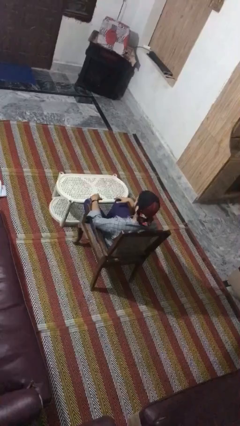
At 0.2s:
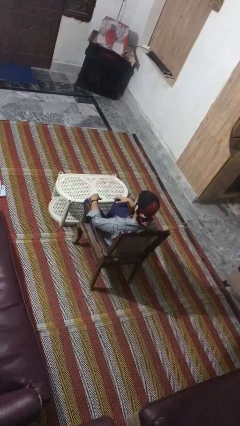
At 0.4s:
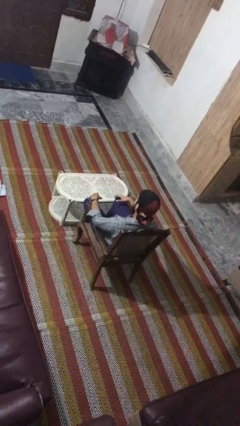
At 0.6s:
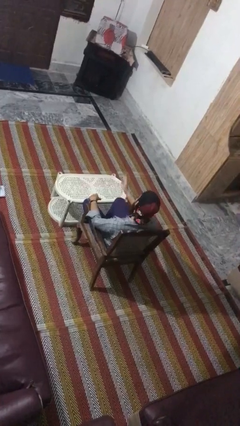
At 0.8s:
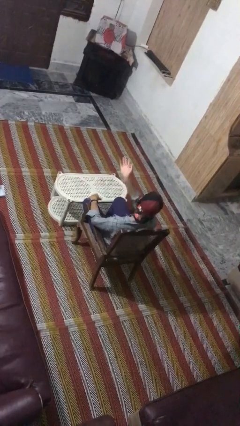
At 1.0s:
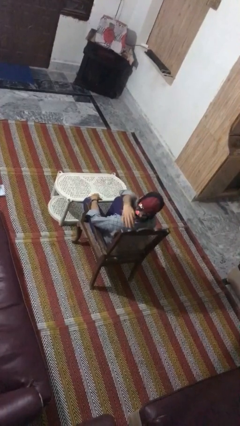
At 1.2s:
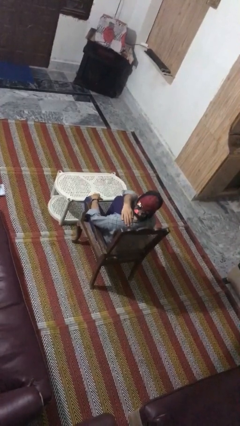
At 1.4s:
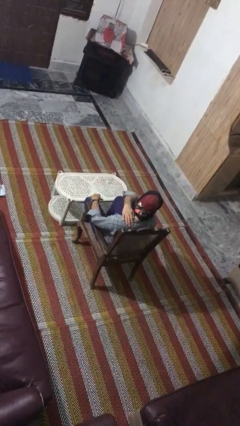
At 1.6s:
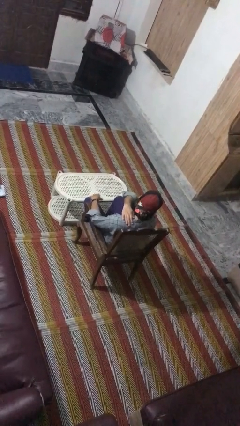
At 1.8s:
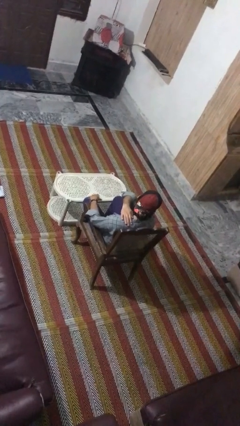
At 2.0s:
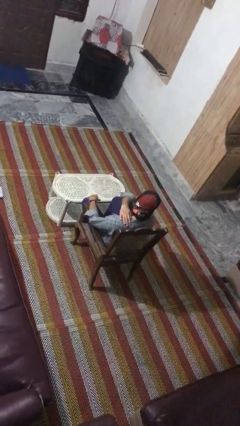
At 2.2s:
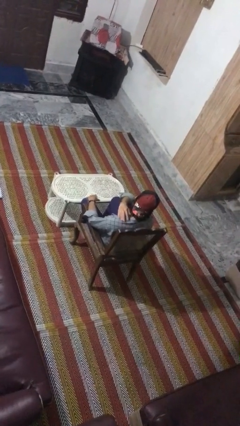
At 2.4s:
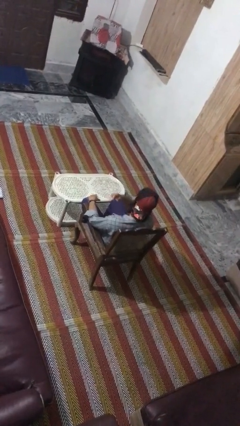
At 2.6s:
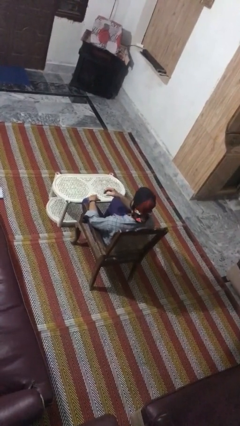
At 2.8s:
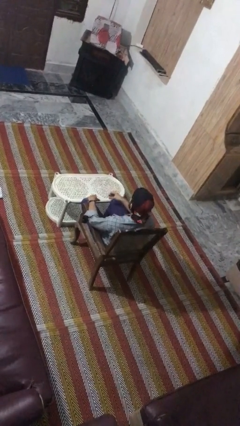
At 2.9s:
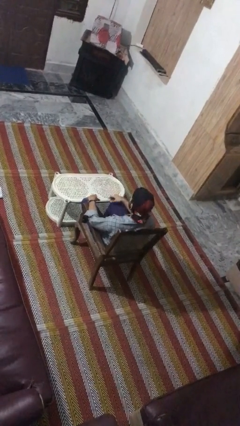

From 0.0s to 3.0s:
person swats bug

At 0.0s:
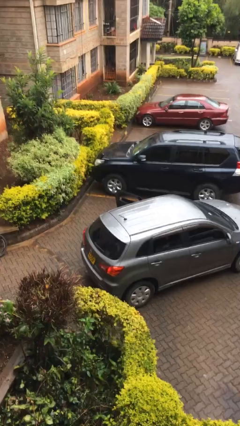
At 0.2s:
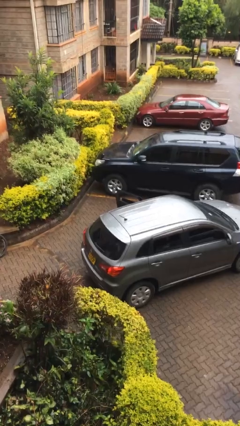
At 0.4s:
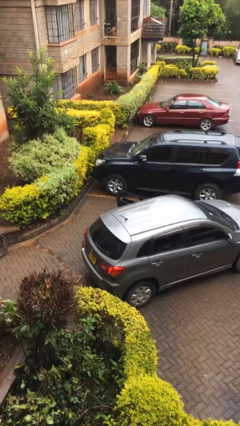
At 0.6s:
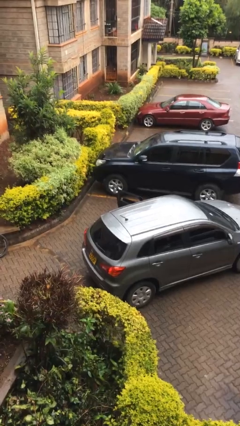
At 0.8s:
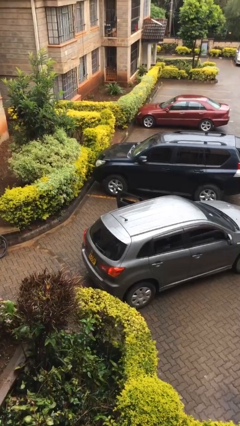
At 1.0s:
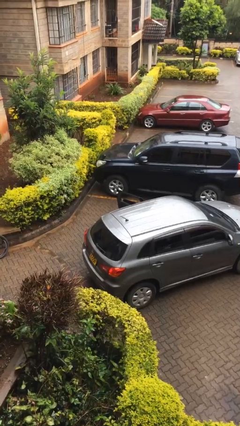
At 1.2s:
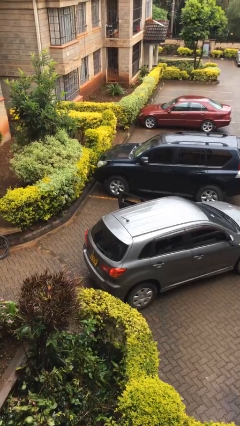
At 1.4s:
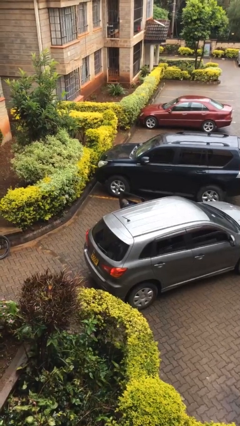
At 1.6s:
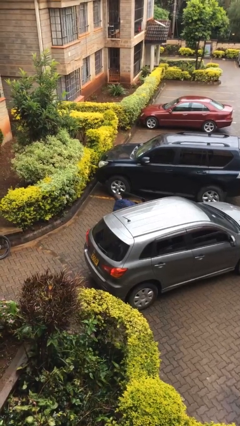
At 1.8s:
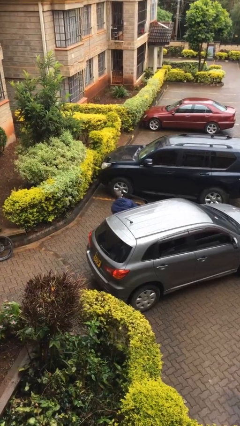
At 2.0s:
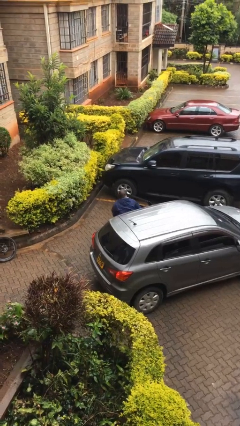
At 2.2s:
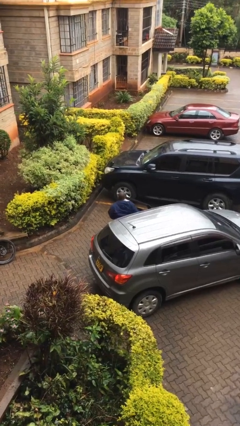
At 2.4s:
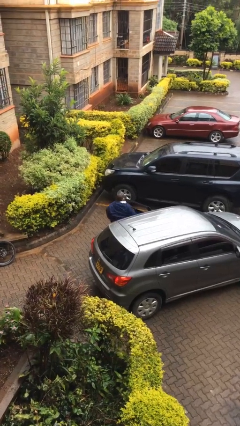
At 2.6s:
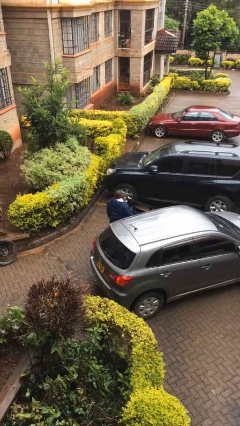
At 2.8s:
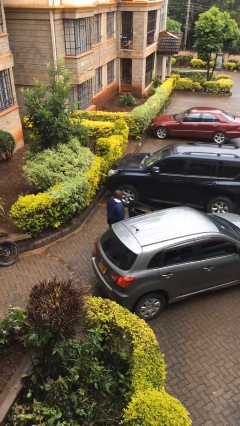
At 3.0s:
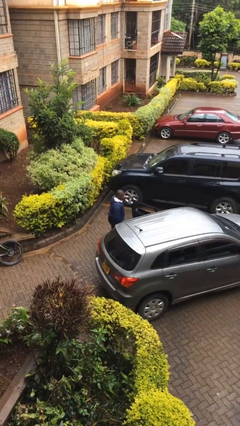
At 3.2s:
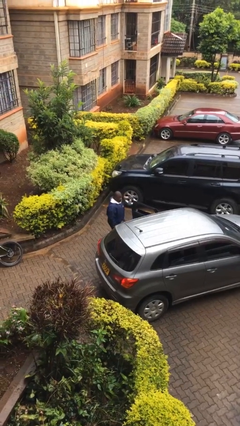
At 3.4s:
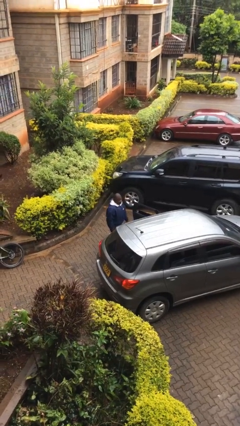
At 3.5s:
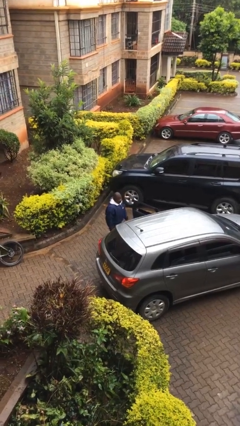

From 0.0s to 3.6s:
person exits car

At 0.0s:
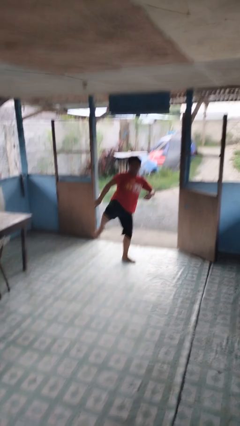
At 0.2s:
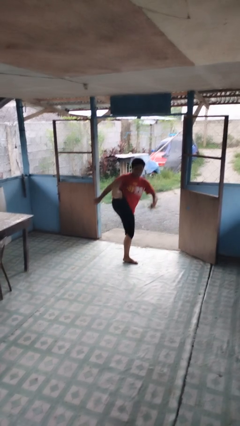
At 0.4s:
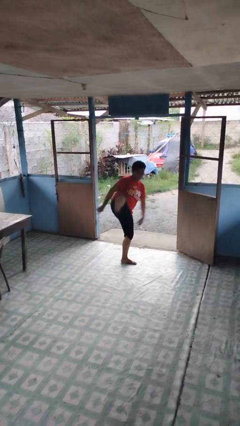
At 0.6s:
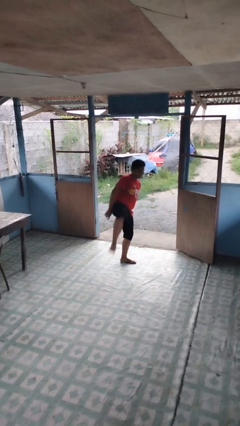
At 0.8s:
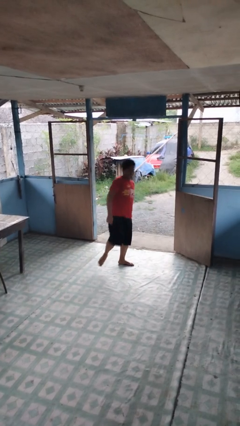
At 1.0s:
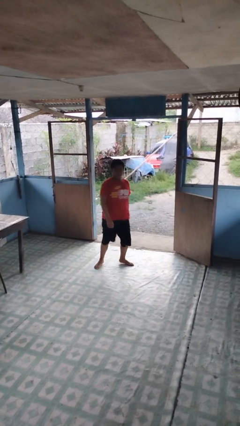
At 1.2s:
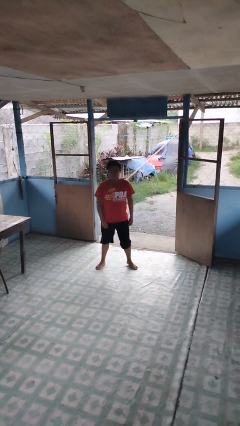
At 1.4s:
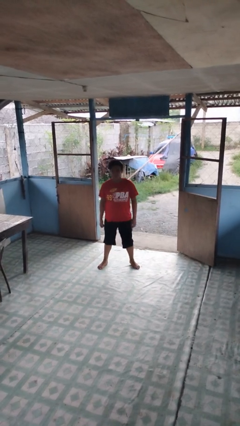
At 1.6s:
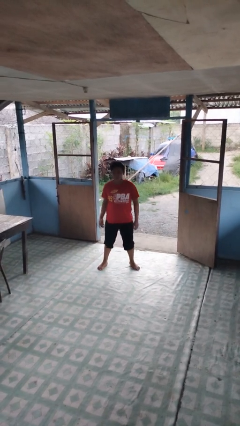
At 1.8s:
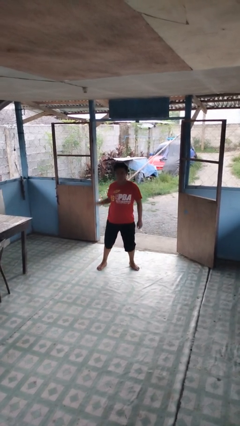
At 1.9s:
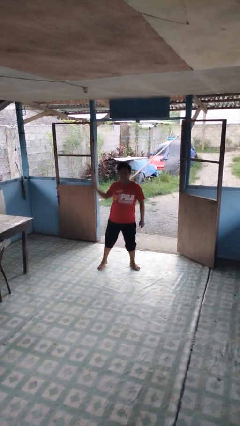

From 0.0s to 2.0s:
person karate kicks

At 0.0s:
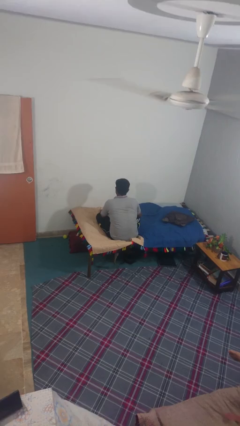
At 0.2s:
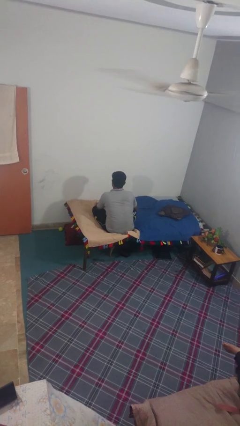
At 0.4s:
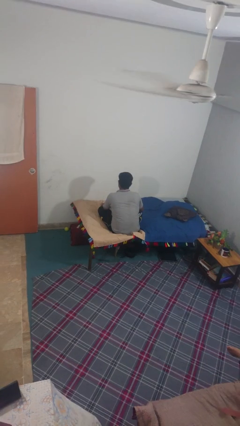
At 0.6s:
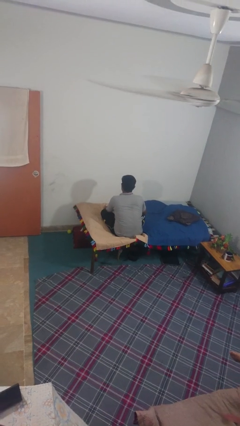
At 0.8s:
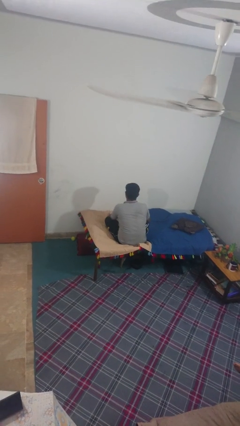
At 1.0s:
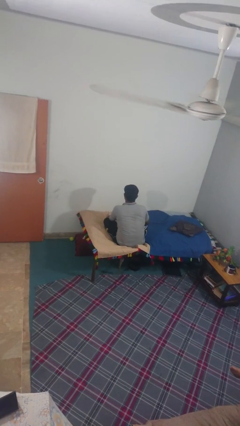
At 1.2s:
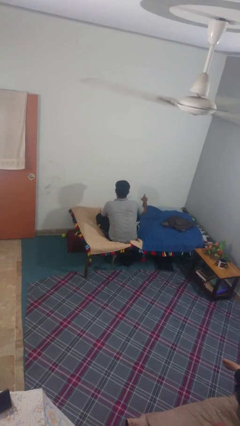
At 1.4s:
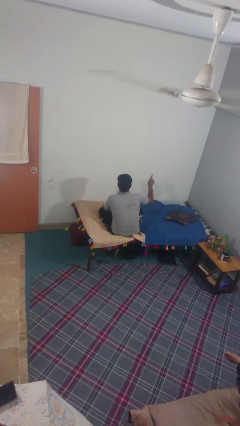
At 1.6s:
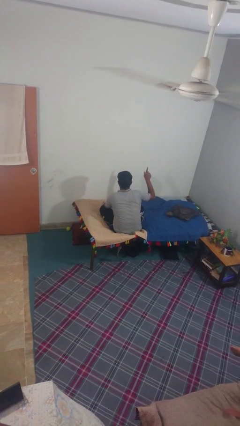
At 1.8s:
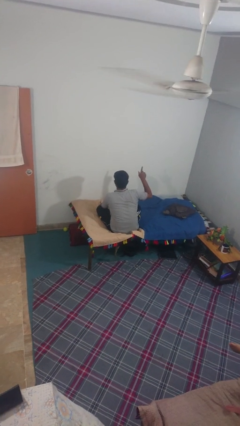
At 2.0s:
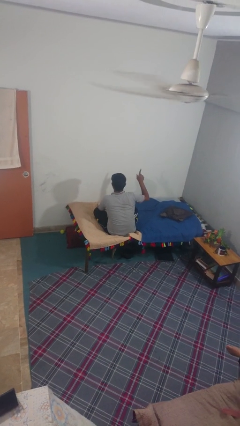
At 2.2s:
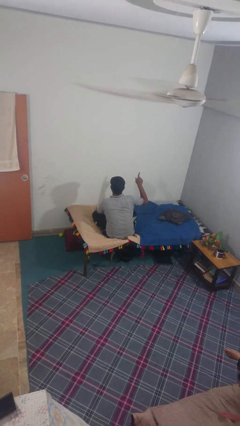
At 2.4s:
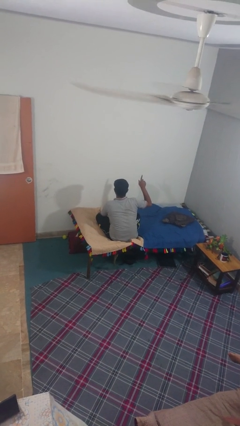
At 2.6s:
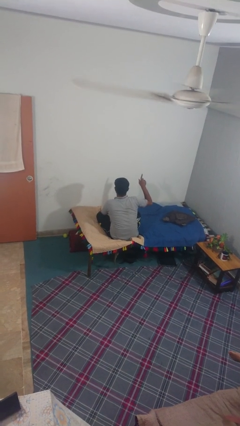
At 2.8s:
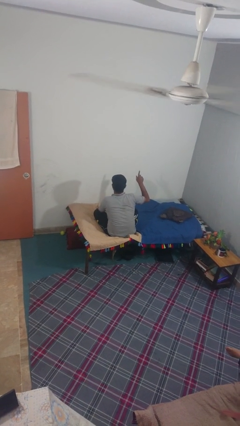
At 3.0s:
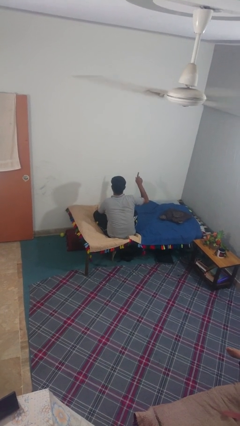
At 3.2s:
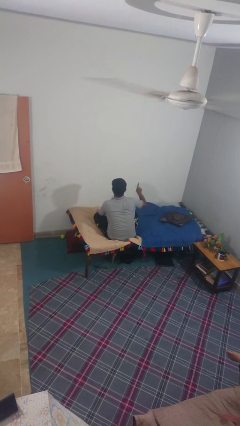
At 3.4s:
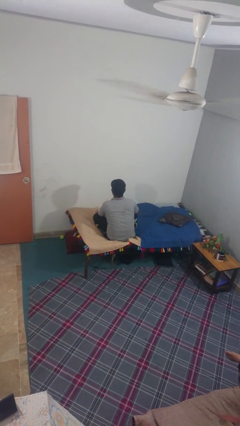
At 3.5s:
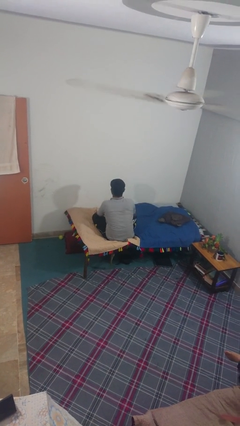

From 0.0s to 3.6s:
person gestures number one

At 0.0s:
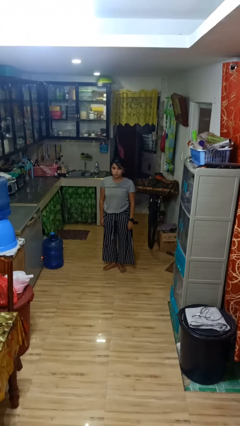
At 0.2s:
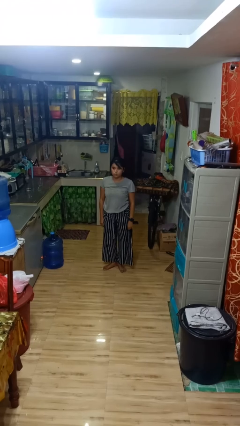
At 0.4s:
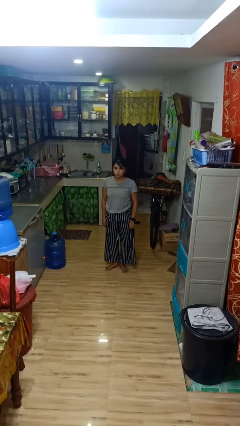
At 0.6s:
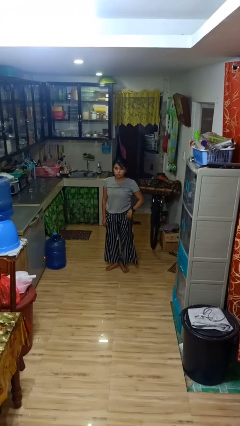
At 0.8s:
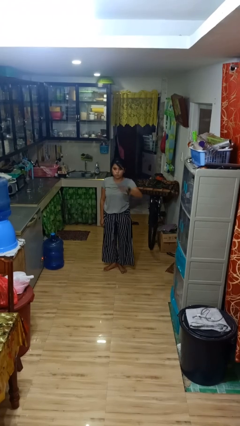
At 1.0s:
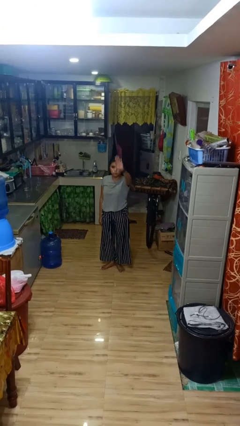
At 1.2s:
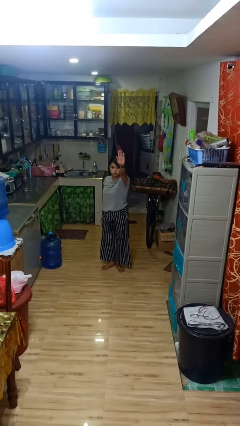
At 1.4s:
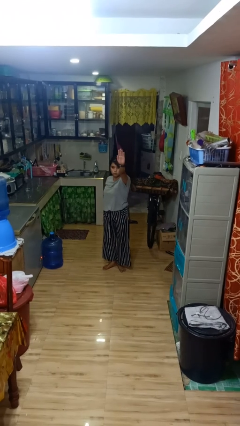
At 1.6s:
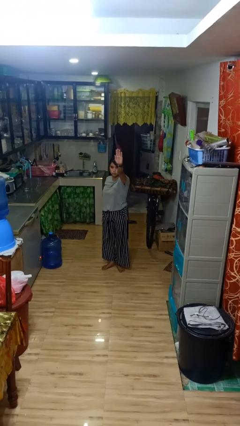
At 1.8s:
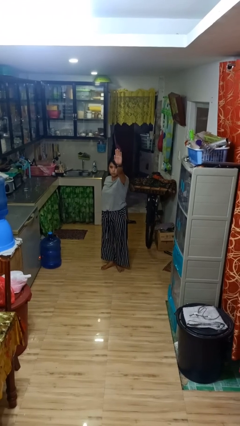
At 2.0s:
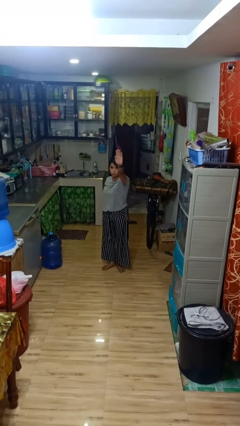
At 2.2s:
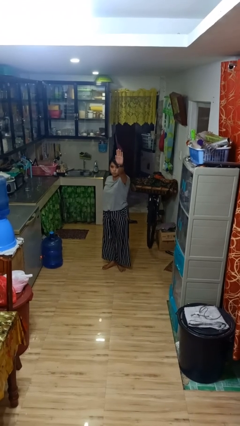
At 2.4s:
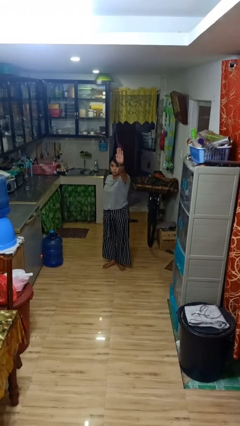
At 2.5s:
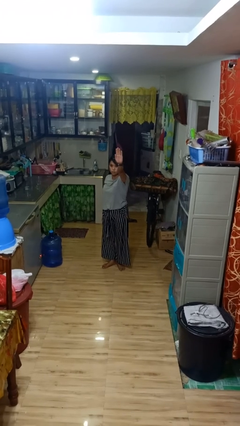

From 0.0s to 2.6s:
person gestures stop

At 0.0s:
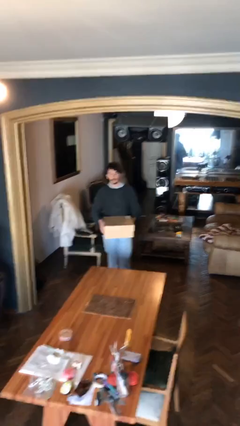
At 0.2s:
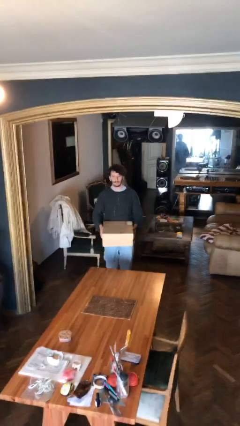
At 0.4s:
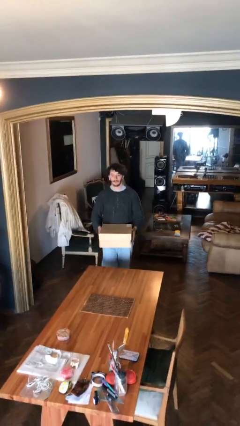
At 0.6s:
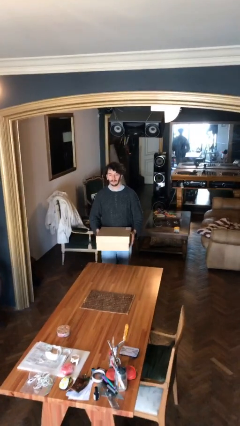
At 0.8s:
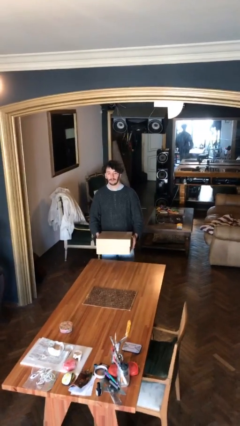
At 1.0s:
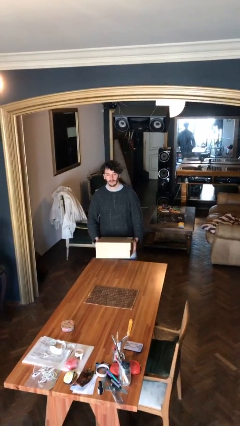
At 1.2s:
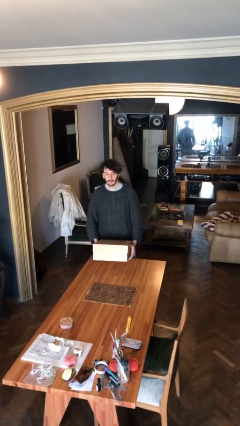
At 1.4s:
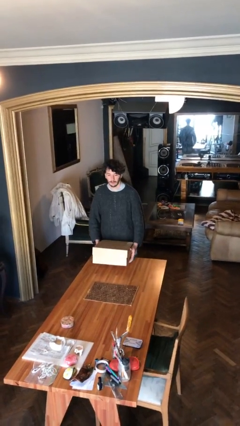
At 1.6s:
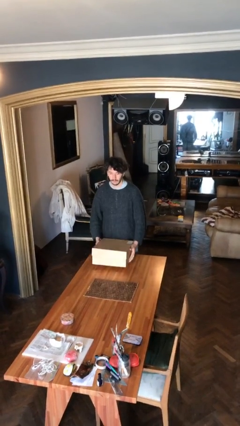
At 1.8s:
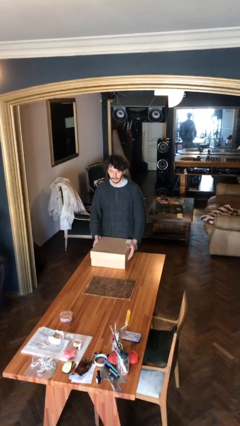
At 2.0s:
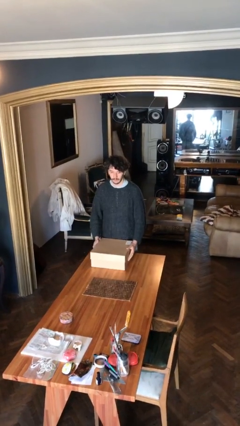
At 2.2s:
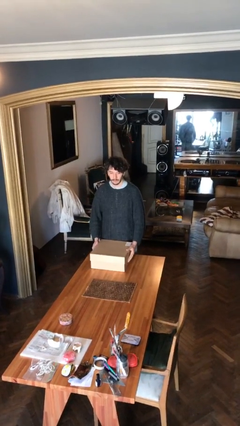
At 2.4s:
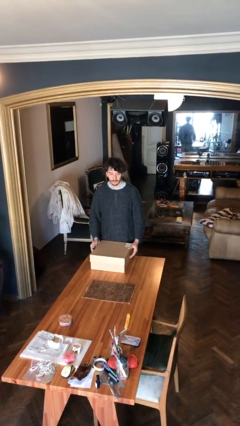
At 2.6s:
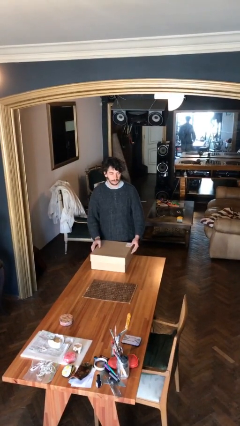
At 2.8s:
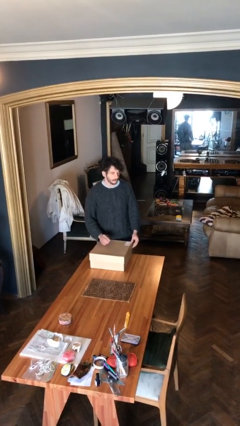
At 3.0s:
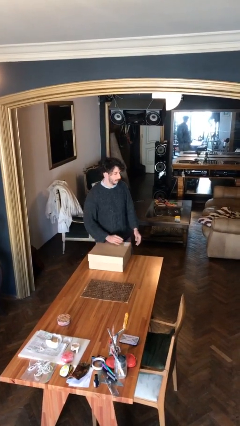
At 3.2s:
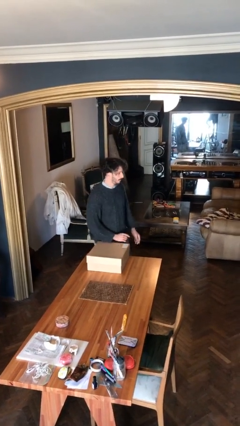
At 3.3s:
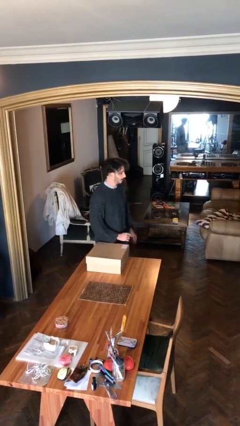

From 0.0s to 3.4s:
person puts down object on table
